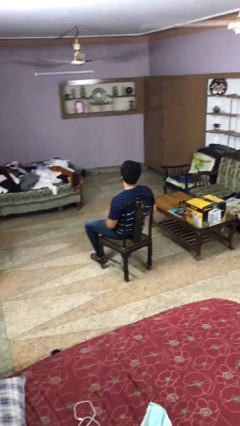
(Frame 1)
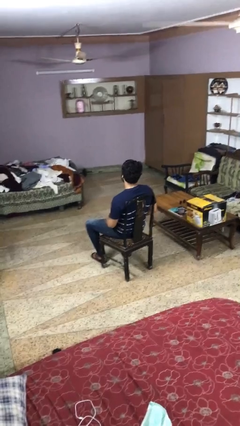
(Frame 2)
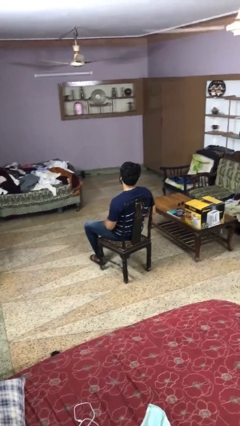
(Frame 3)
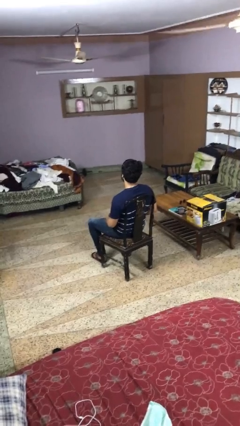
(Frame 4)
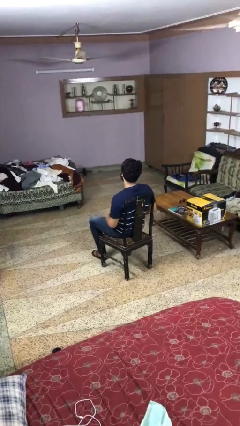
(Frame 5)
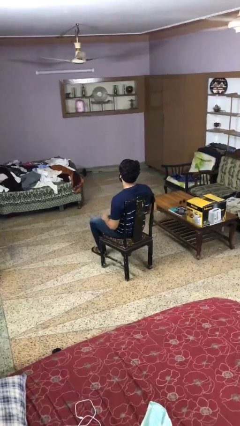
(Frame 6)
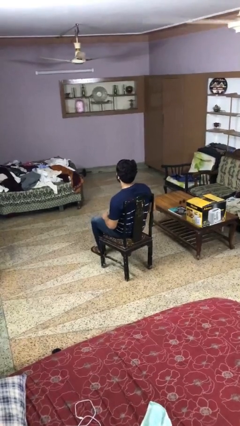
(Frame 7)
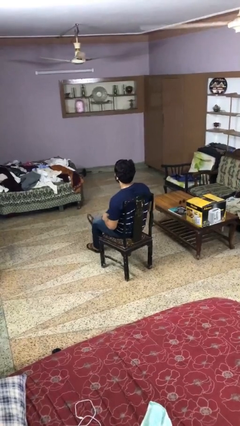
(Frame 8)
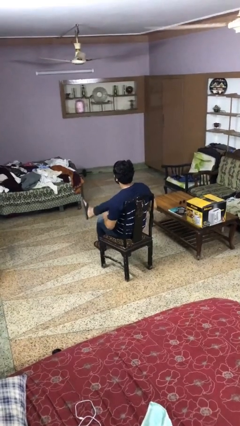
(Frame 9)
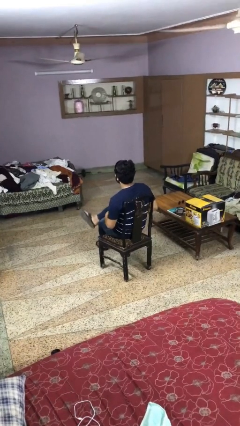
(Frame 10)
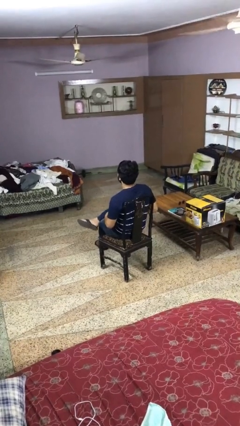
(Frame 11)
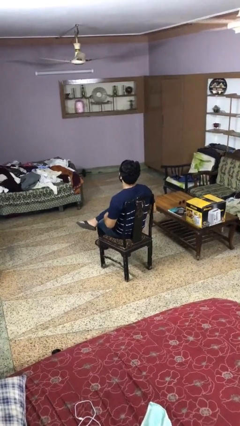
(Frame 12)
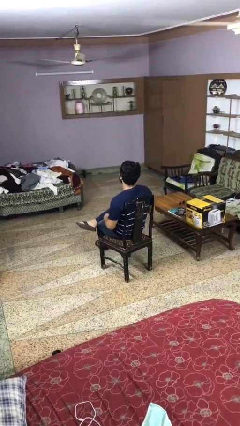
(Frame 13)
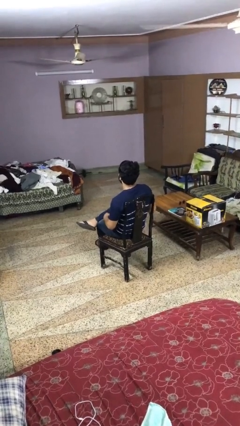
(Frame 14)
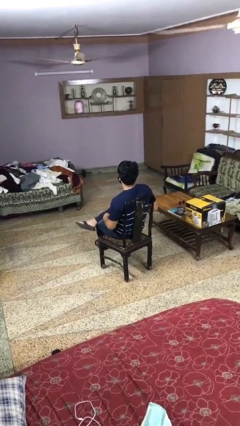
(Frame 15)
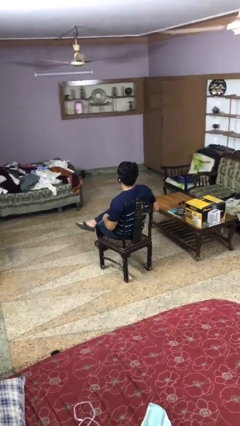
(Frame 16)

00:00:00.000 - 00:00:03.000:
person crosses legs

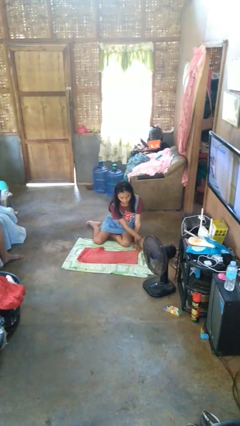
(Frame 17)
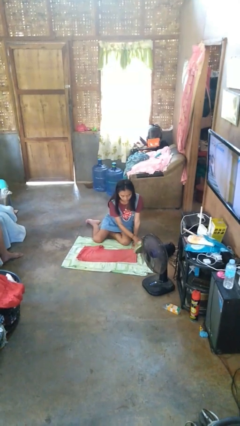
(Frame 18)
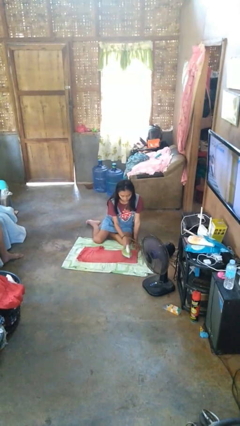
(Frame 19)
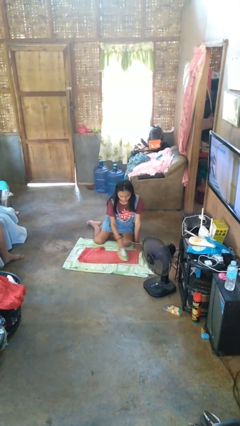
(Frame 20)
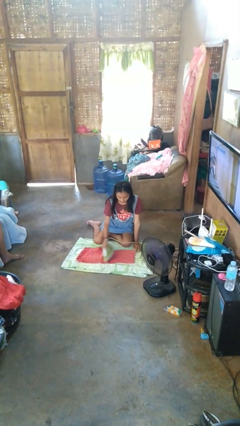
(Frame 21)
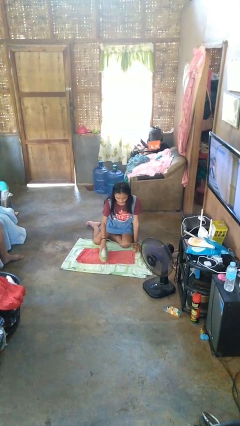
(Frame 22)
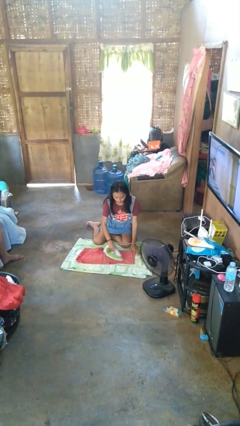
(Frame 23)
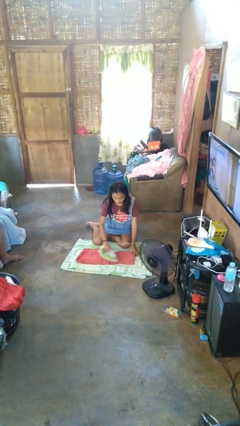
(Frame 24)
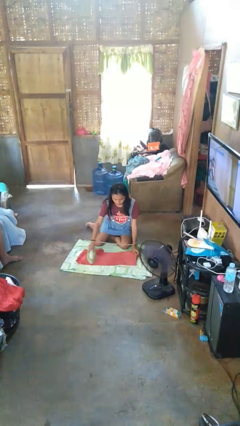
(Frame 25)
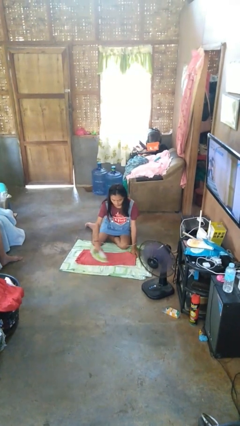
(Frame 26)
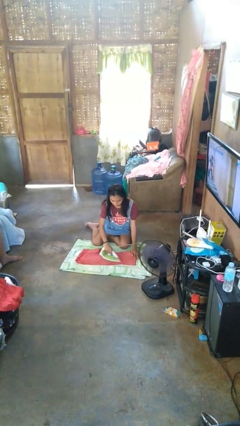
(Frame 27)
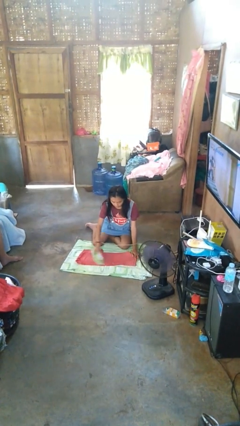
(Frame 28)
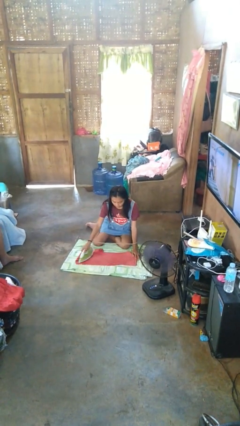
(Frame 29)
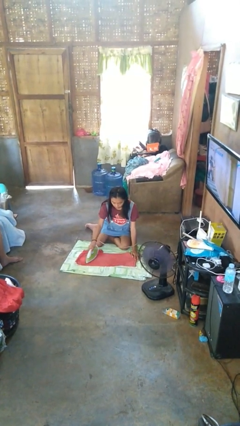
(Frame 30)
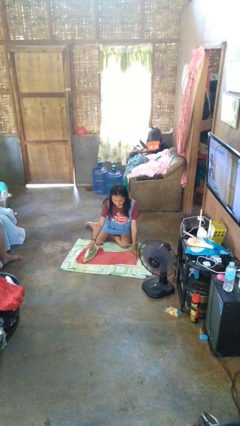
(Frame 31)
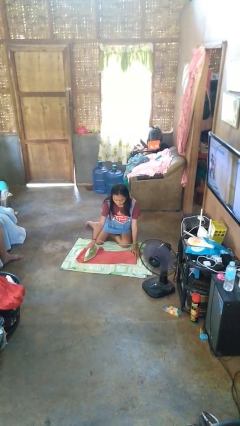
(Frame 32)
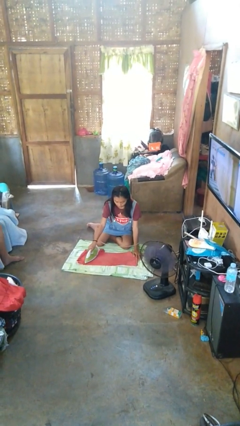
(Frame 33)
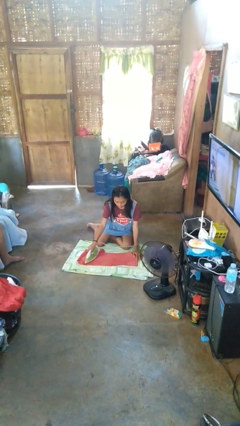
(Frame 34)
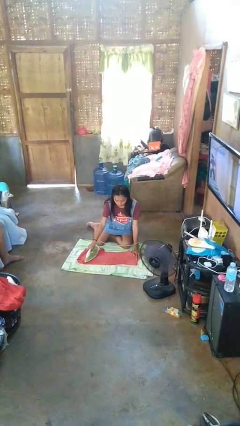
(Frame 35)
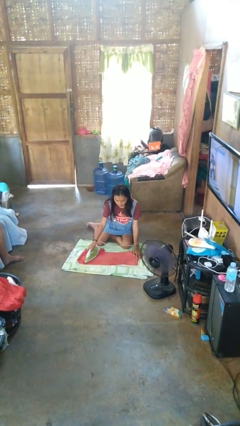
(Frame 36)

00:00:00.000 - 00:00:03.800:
person irons clothes

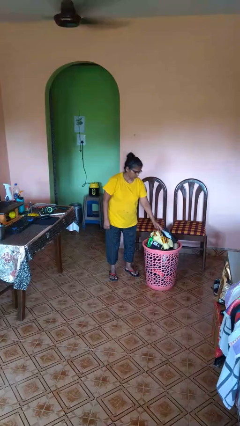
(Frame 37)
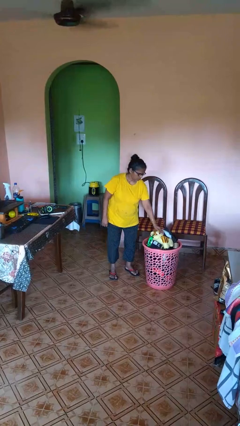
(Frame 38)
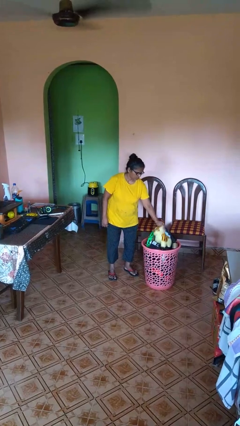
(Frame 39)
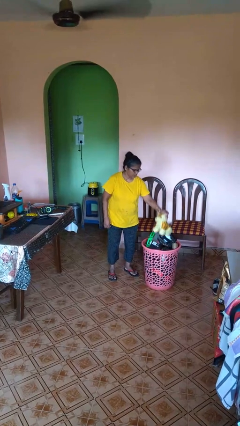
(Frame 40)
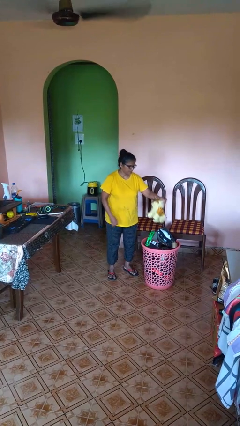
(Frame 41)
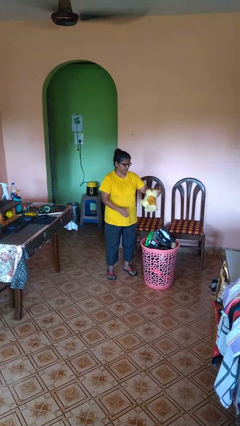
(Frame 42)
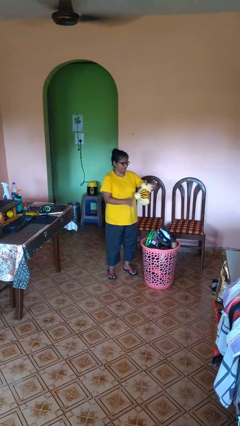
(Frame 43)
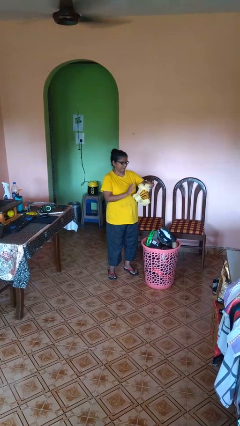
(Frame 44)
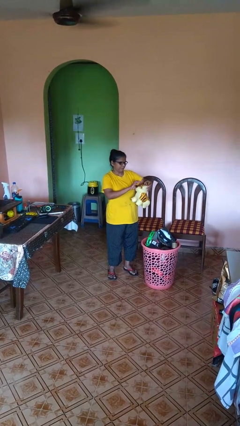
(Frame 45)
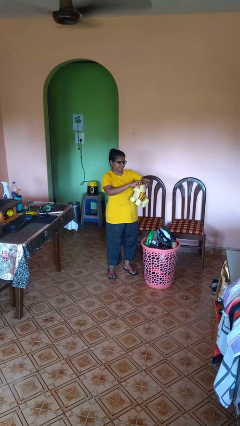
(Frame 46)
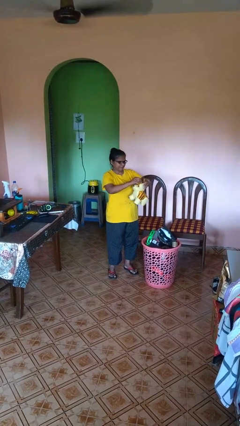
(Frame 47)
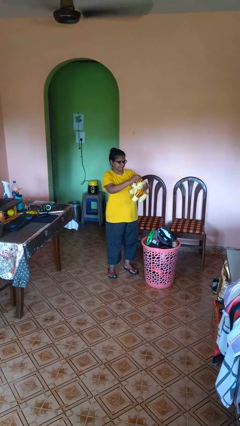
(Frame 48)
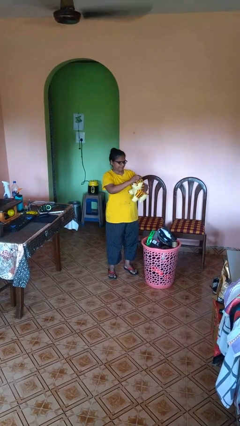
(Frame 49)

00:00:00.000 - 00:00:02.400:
person takes object from basket

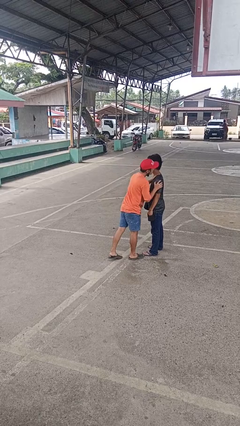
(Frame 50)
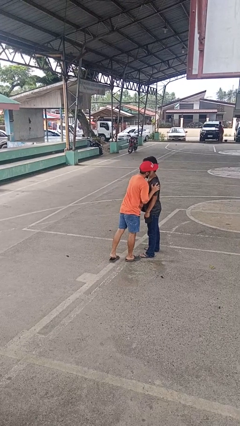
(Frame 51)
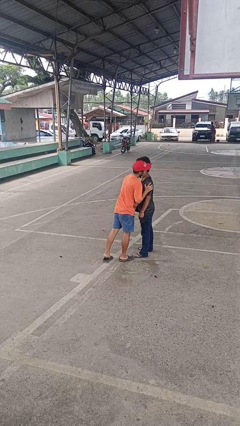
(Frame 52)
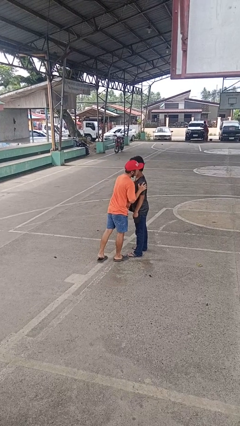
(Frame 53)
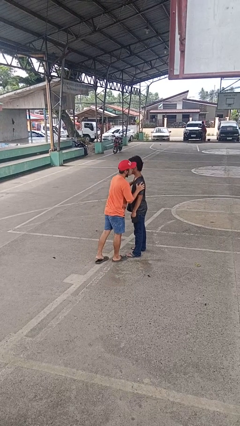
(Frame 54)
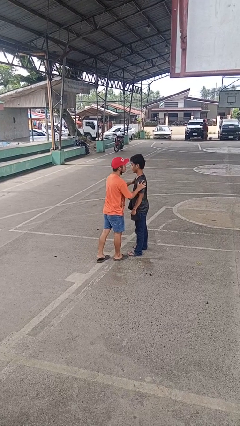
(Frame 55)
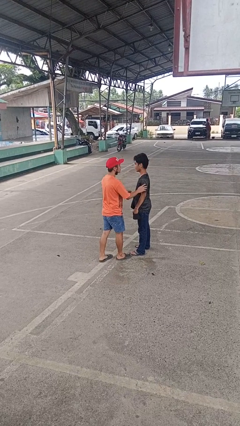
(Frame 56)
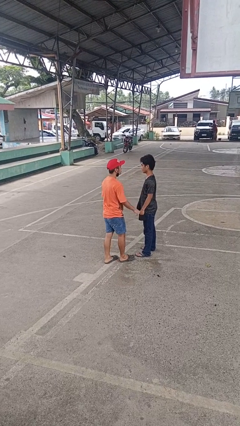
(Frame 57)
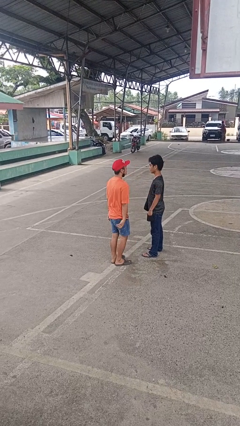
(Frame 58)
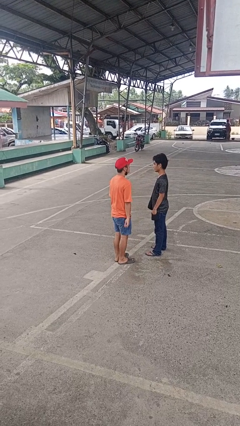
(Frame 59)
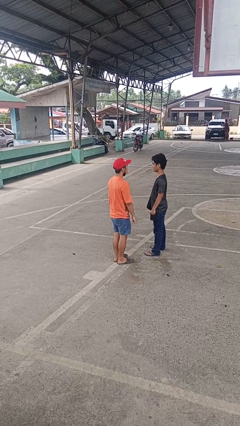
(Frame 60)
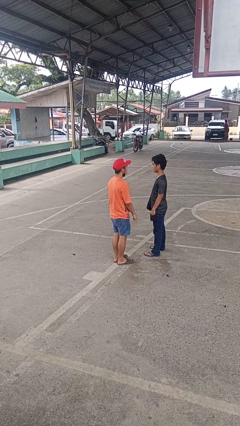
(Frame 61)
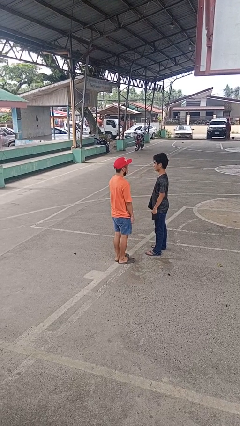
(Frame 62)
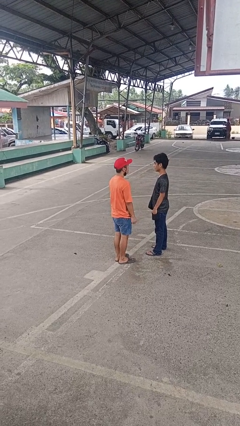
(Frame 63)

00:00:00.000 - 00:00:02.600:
person kisses cheek of person

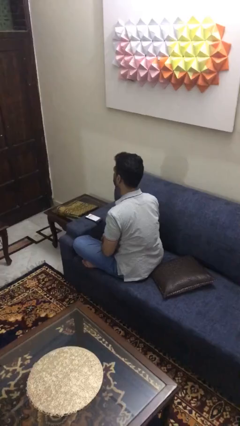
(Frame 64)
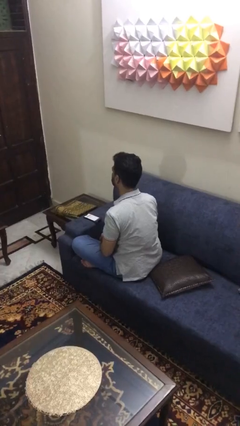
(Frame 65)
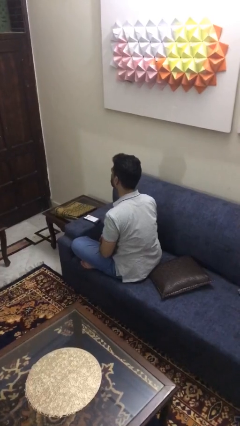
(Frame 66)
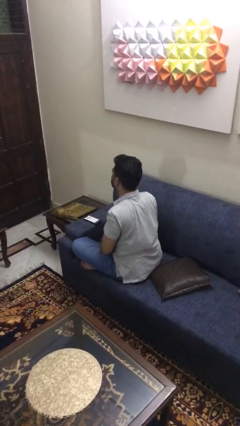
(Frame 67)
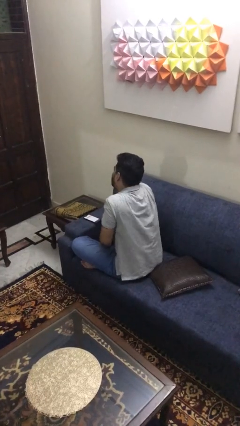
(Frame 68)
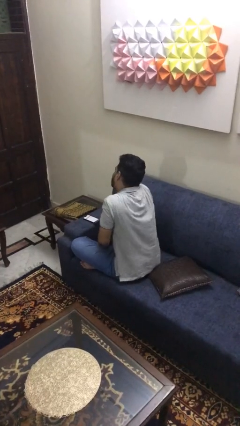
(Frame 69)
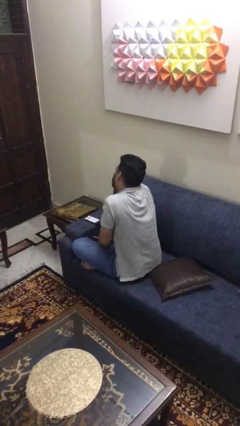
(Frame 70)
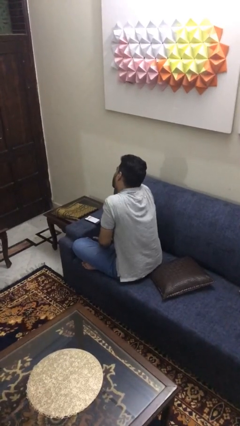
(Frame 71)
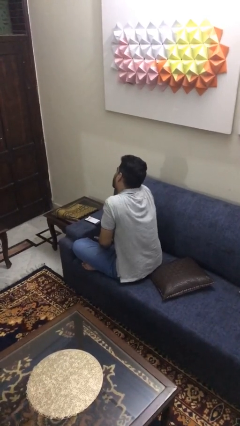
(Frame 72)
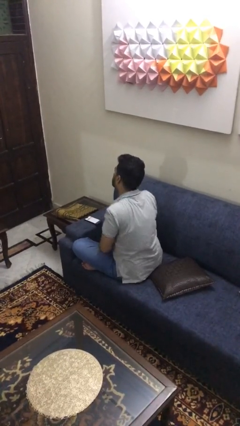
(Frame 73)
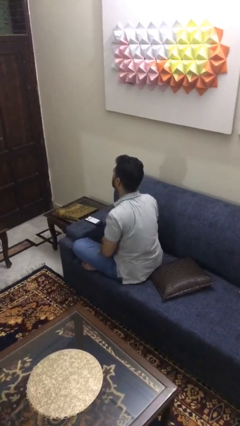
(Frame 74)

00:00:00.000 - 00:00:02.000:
person shrugs

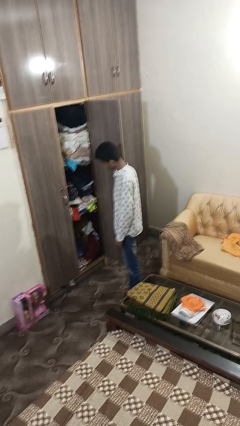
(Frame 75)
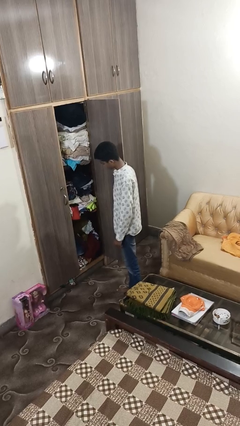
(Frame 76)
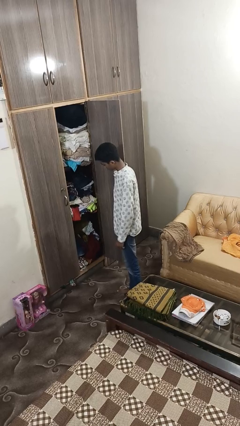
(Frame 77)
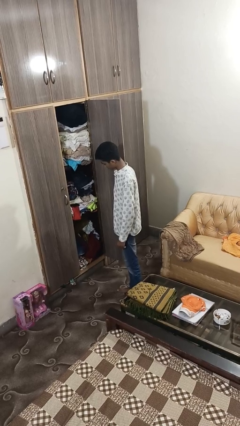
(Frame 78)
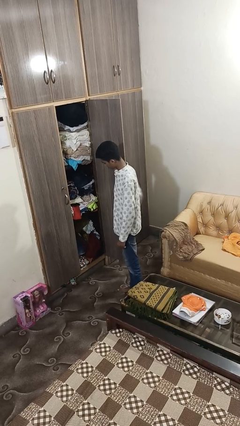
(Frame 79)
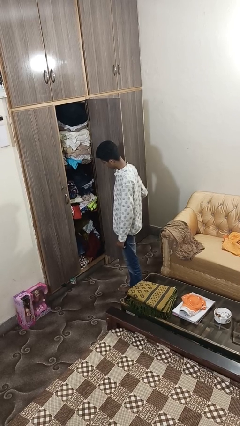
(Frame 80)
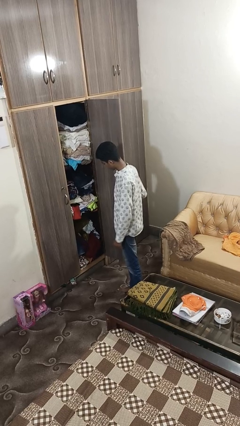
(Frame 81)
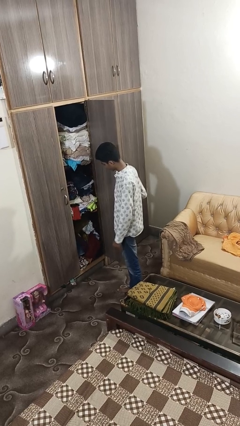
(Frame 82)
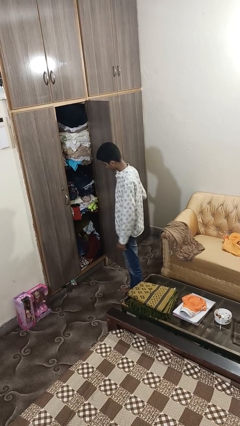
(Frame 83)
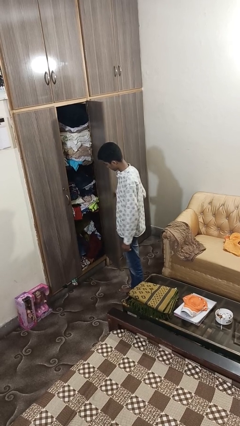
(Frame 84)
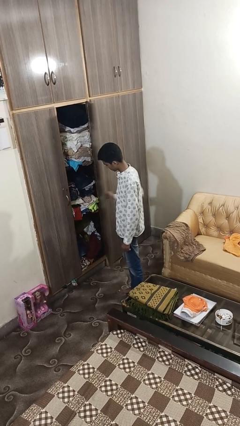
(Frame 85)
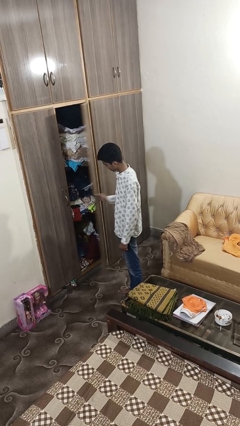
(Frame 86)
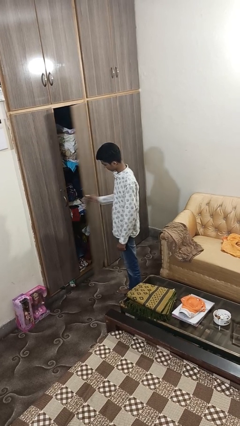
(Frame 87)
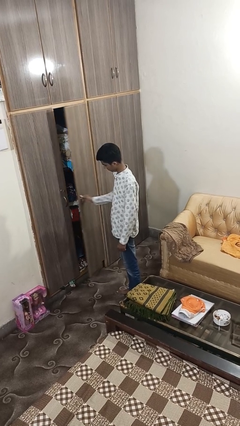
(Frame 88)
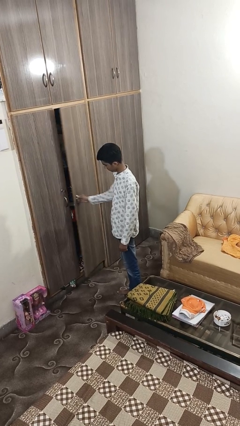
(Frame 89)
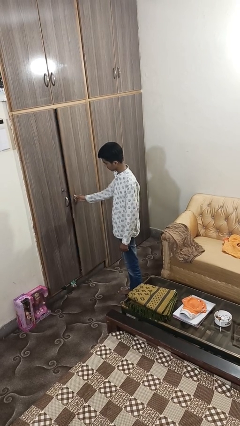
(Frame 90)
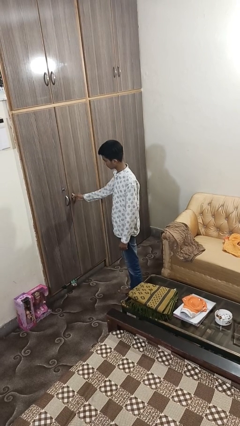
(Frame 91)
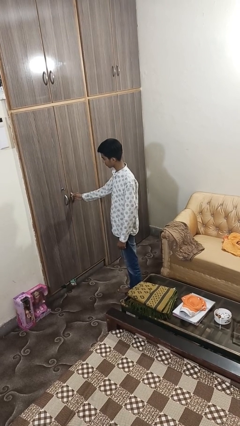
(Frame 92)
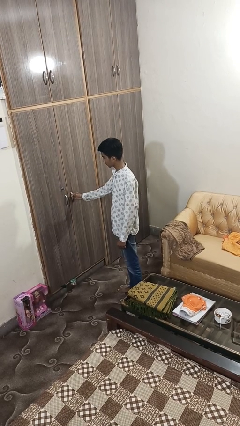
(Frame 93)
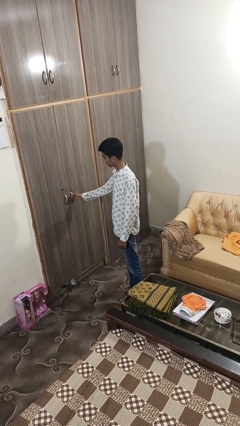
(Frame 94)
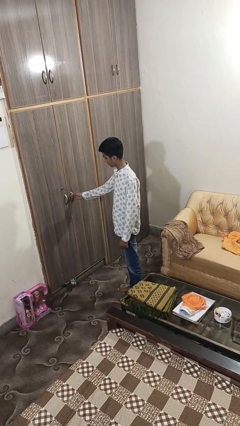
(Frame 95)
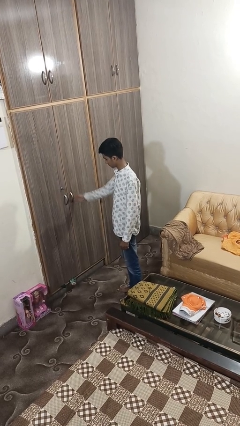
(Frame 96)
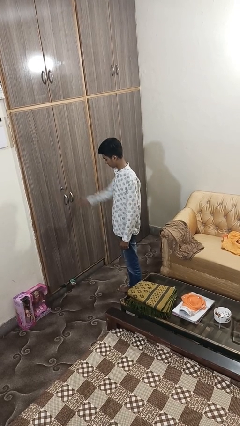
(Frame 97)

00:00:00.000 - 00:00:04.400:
person closes closet door
